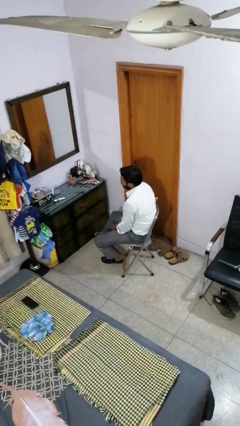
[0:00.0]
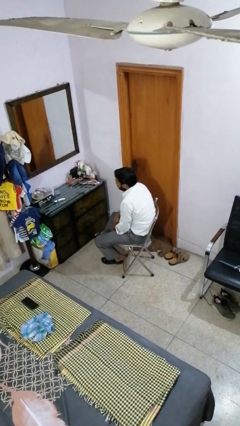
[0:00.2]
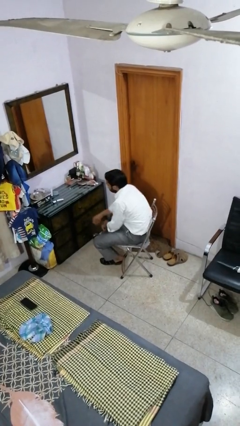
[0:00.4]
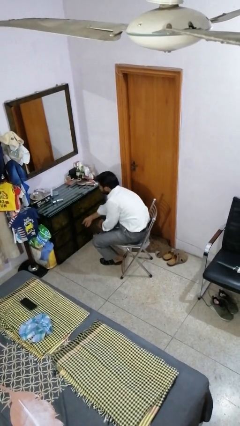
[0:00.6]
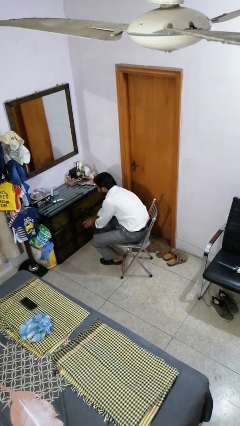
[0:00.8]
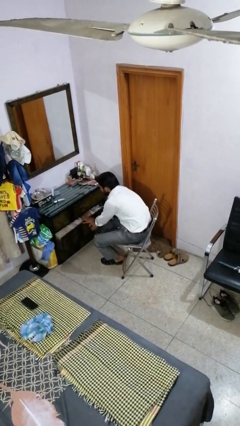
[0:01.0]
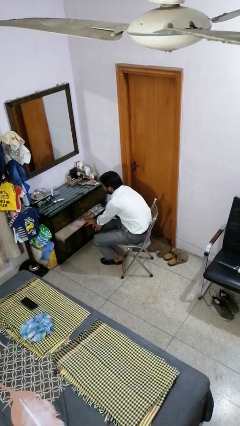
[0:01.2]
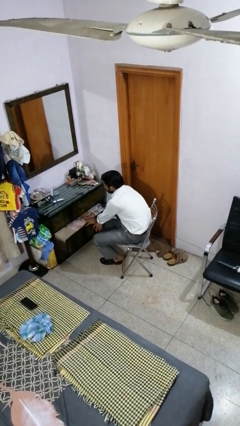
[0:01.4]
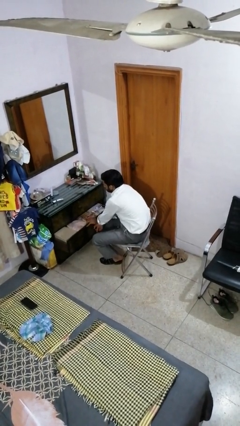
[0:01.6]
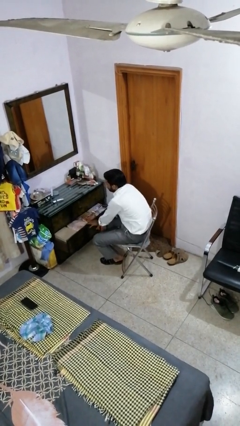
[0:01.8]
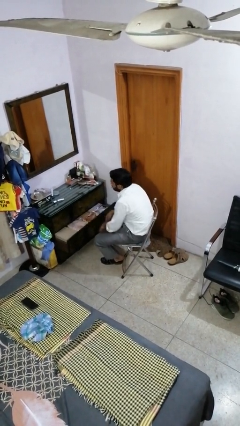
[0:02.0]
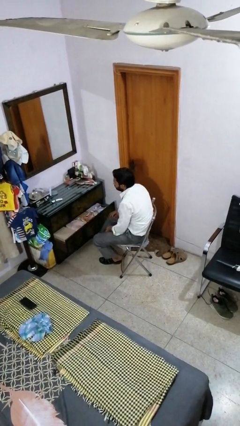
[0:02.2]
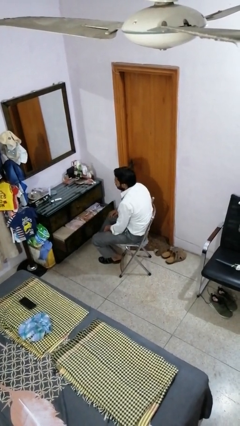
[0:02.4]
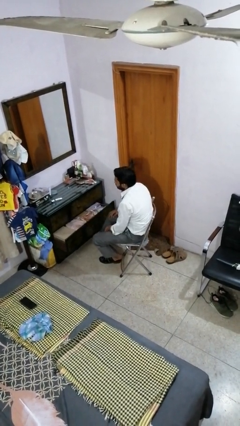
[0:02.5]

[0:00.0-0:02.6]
person opens dresser drawer

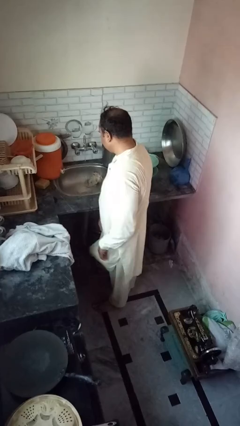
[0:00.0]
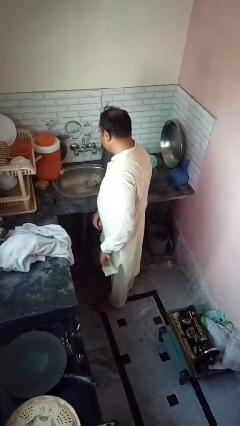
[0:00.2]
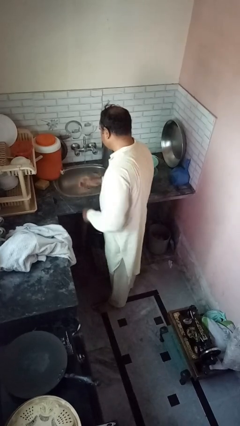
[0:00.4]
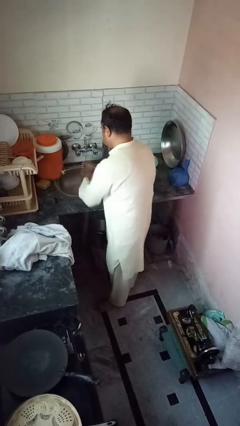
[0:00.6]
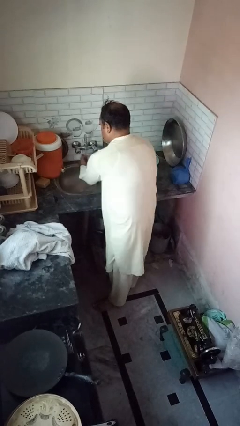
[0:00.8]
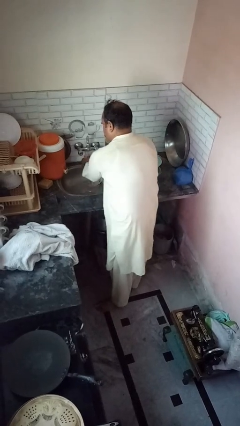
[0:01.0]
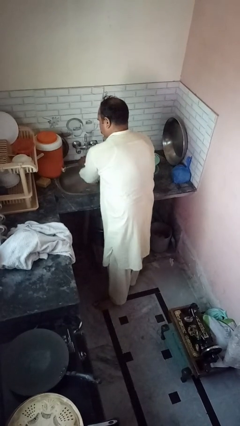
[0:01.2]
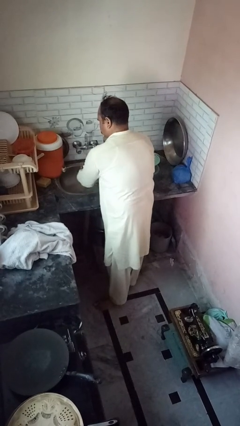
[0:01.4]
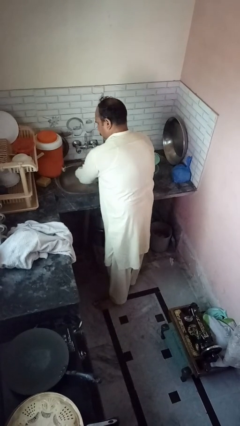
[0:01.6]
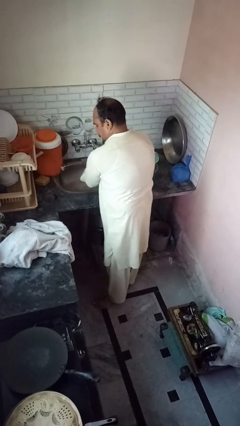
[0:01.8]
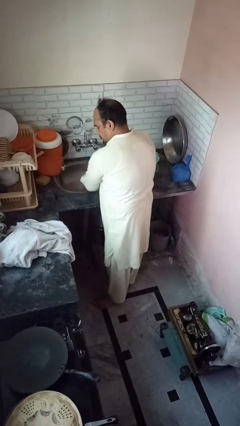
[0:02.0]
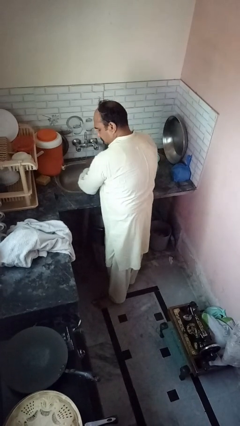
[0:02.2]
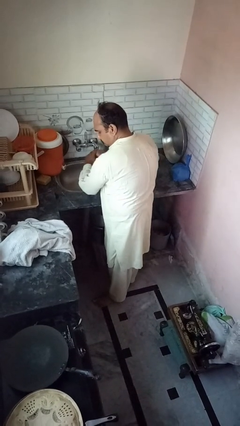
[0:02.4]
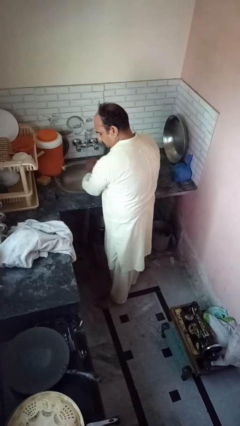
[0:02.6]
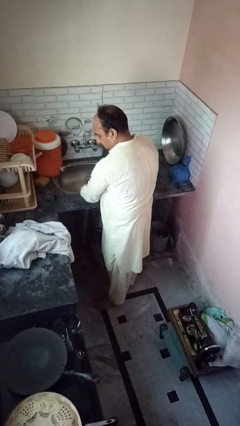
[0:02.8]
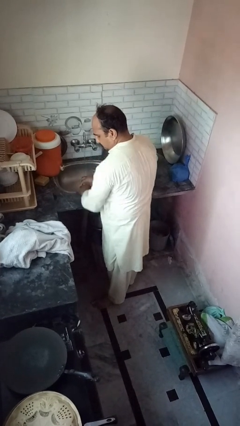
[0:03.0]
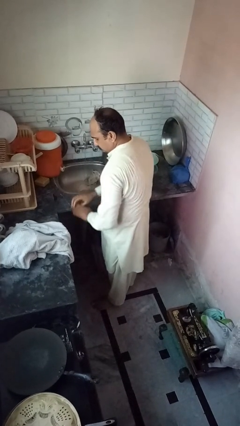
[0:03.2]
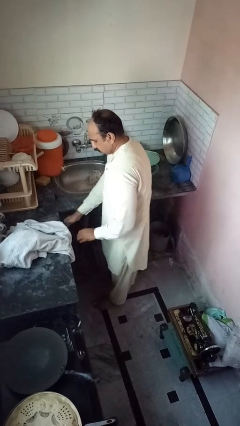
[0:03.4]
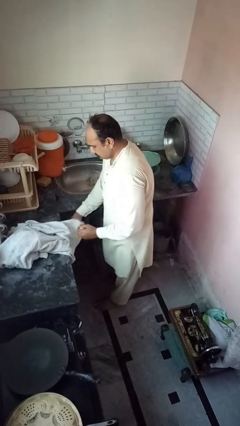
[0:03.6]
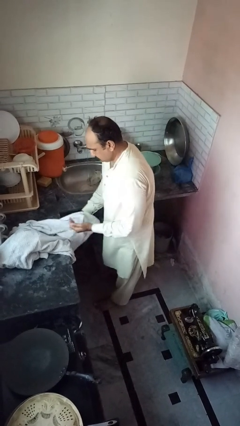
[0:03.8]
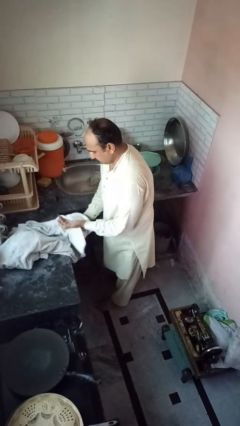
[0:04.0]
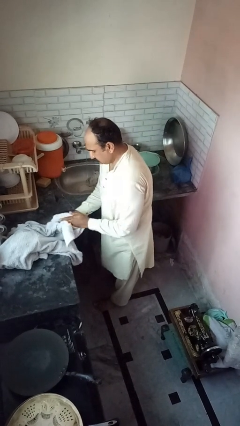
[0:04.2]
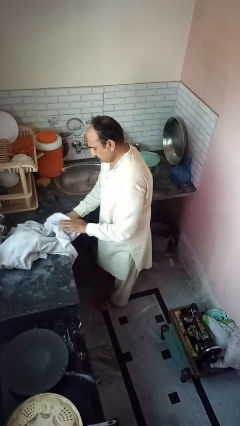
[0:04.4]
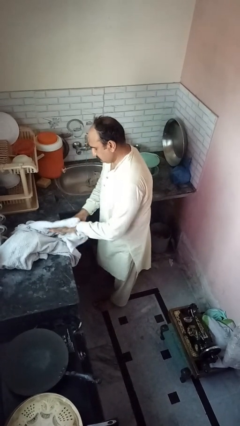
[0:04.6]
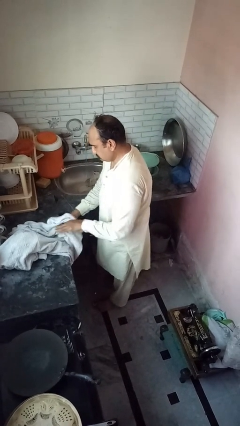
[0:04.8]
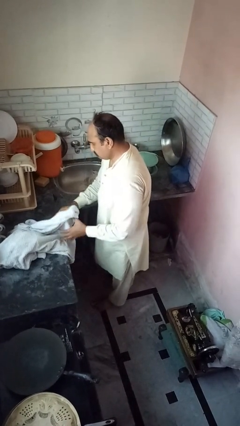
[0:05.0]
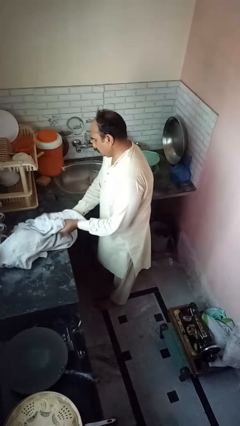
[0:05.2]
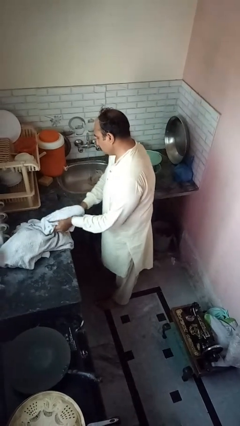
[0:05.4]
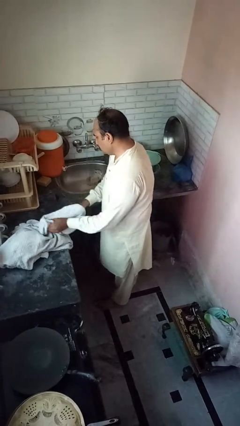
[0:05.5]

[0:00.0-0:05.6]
person washes hands

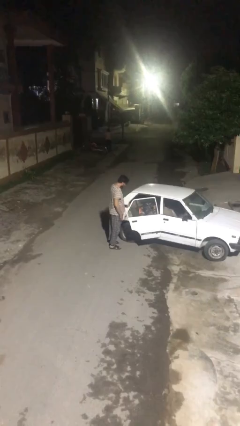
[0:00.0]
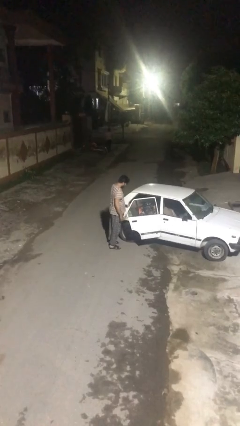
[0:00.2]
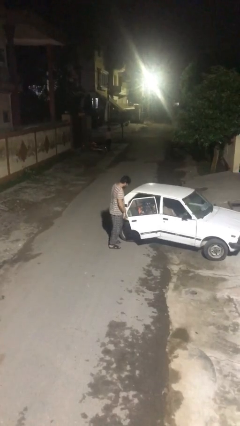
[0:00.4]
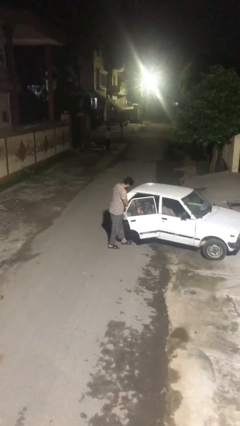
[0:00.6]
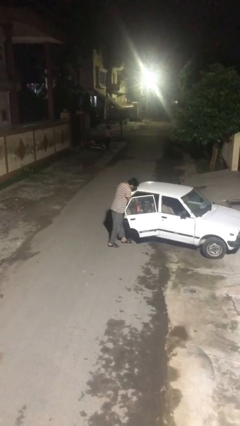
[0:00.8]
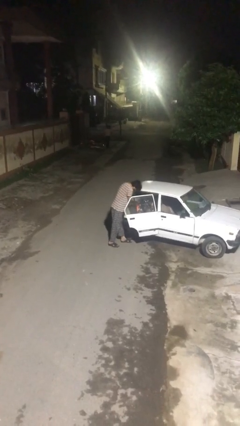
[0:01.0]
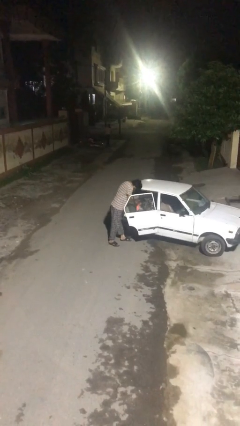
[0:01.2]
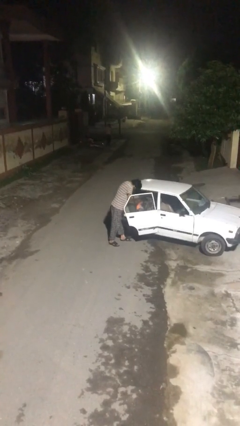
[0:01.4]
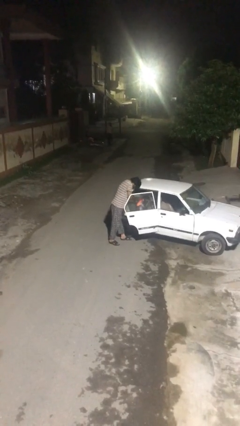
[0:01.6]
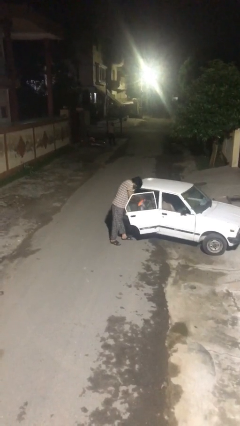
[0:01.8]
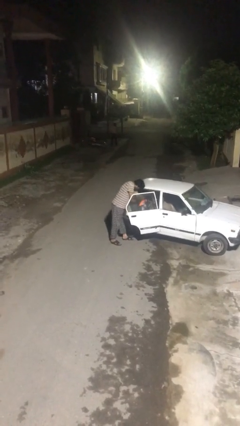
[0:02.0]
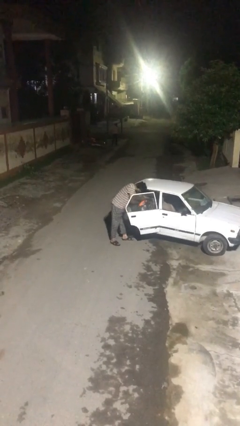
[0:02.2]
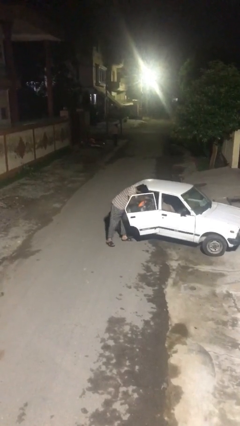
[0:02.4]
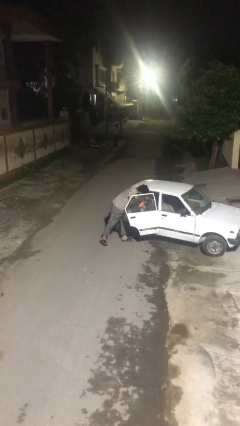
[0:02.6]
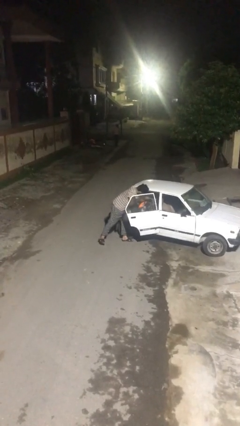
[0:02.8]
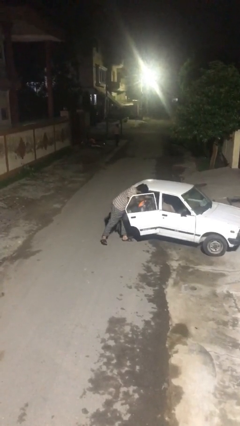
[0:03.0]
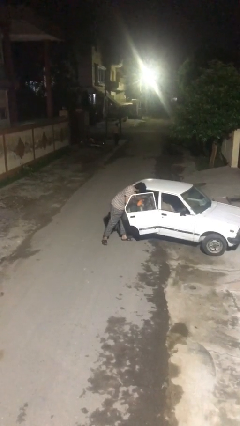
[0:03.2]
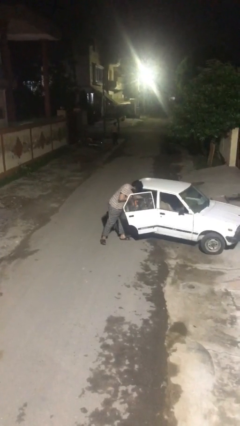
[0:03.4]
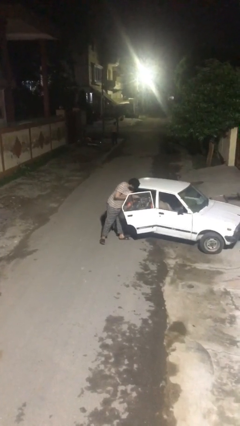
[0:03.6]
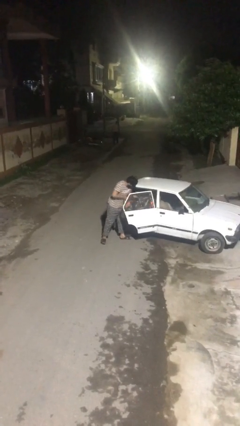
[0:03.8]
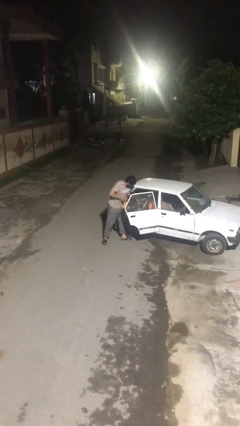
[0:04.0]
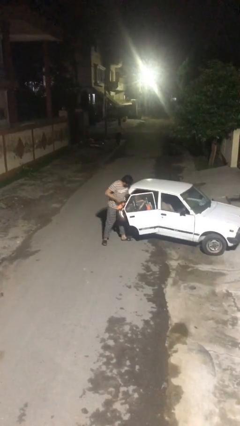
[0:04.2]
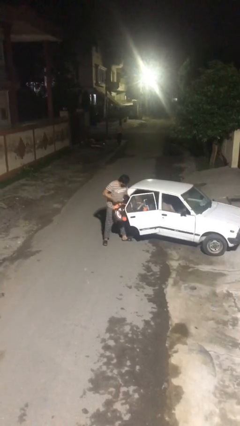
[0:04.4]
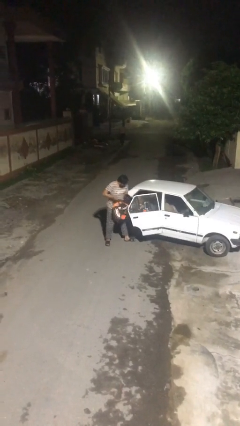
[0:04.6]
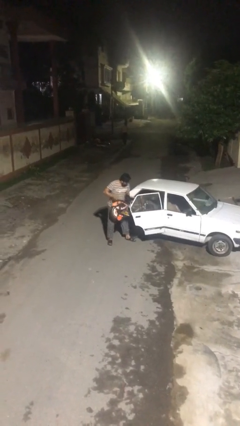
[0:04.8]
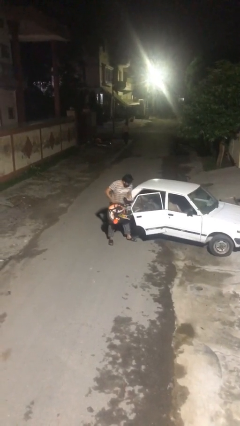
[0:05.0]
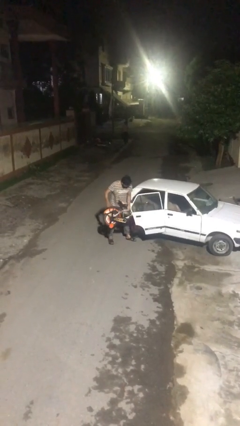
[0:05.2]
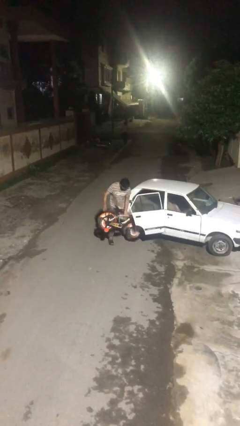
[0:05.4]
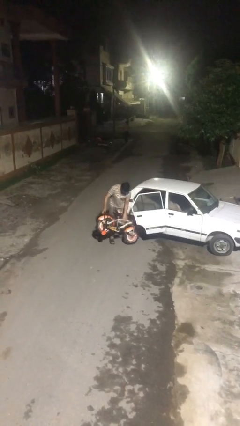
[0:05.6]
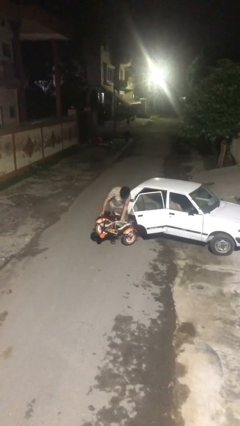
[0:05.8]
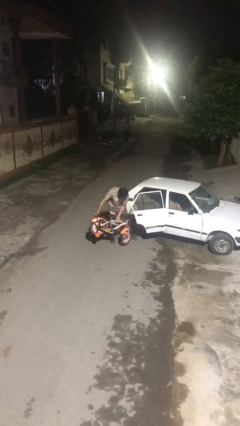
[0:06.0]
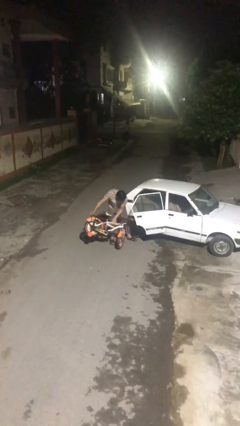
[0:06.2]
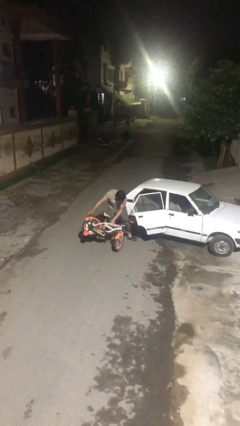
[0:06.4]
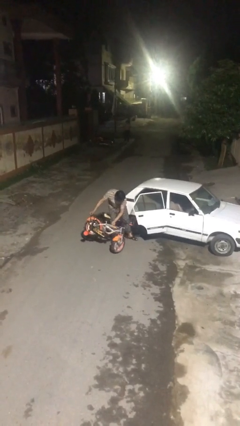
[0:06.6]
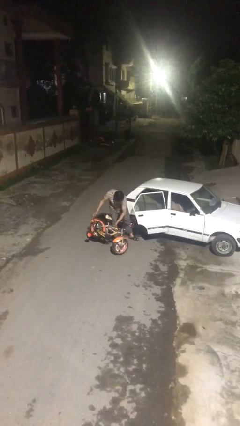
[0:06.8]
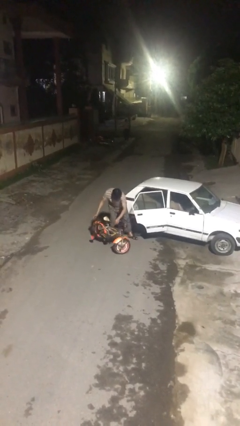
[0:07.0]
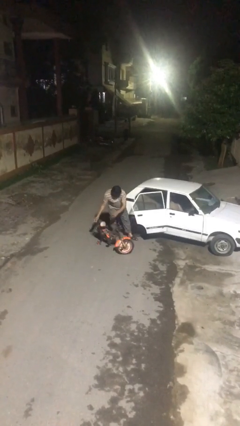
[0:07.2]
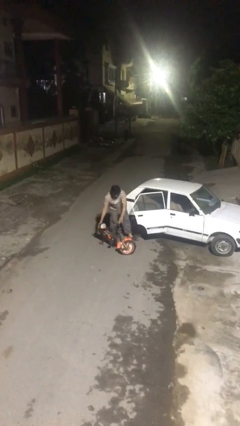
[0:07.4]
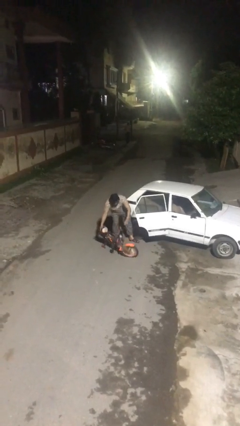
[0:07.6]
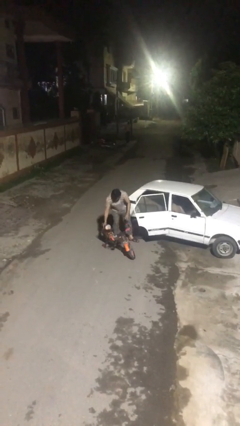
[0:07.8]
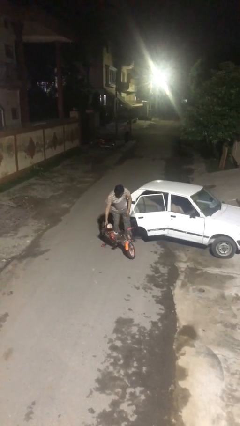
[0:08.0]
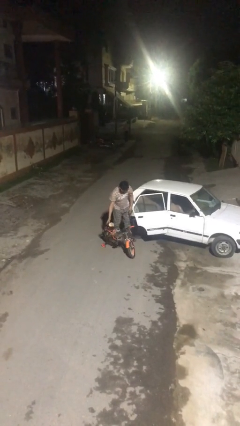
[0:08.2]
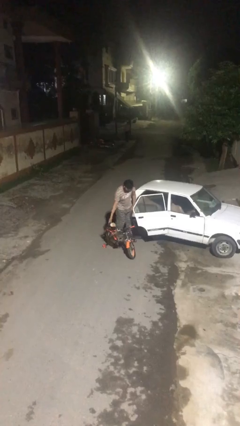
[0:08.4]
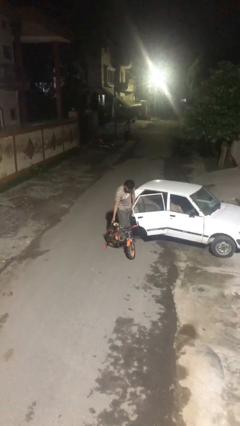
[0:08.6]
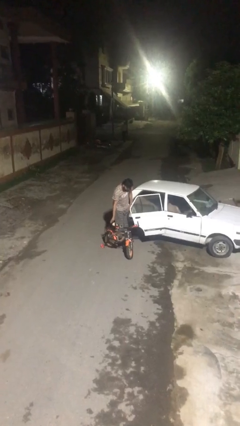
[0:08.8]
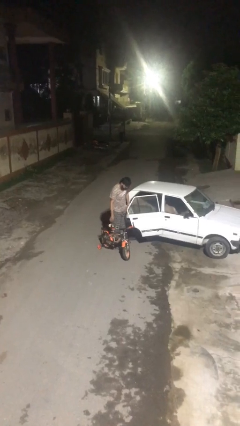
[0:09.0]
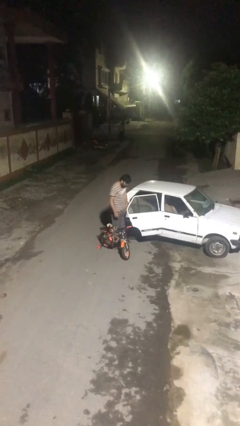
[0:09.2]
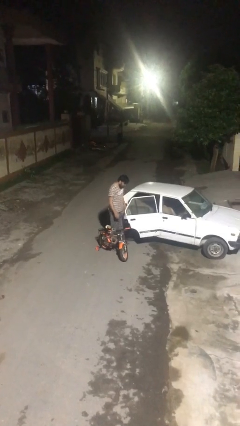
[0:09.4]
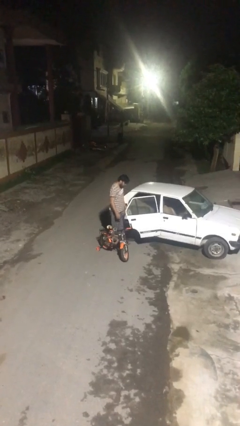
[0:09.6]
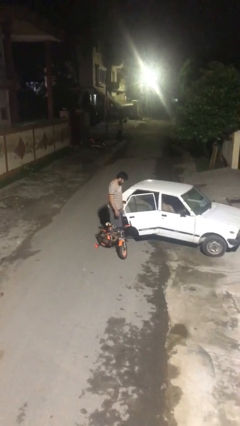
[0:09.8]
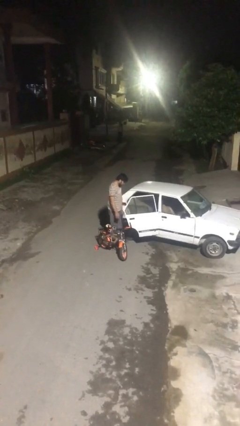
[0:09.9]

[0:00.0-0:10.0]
person unloads car

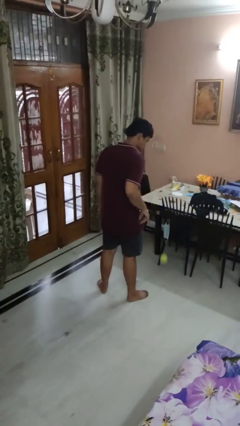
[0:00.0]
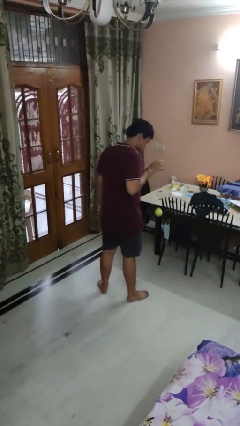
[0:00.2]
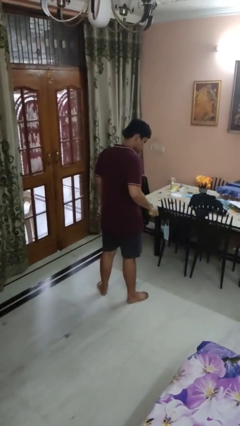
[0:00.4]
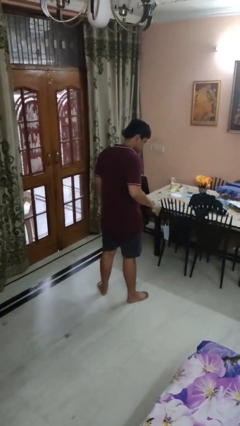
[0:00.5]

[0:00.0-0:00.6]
person bounces ball on floor
